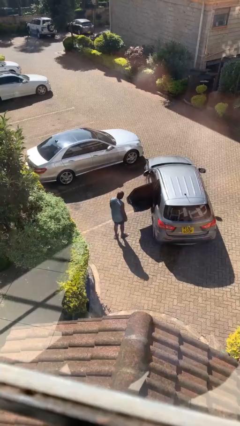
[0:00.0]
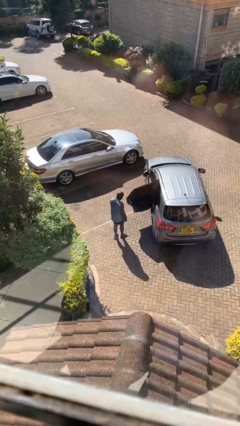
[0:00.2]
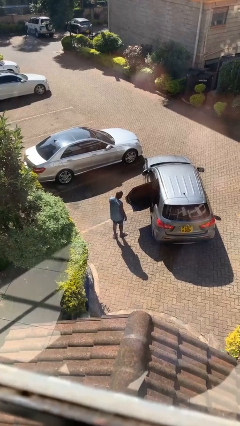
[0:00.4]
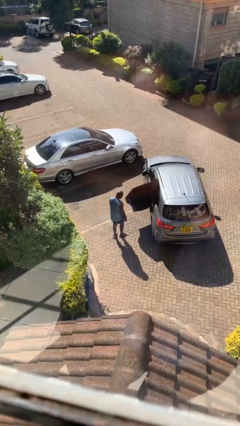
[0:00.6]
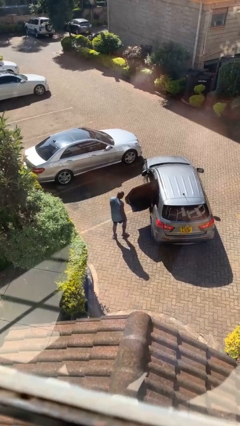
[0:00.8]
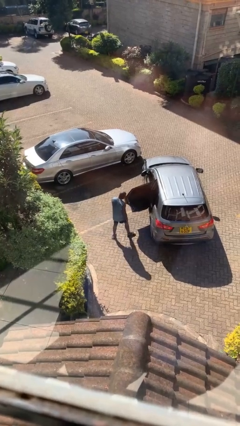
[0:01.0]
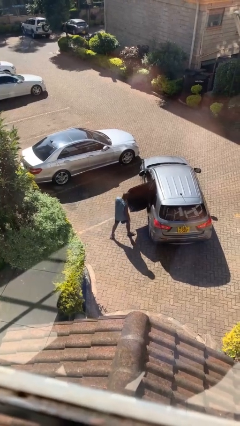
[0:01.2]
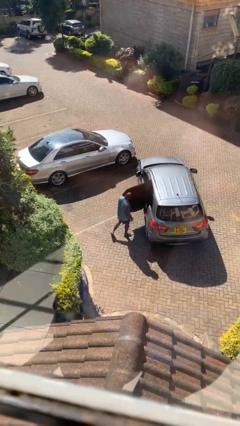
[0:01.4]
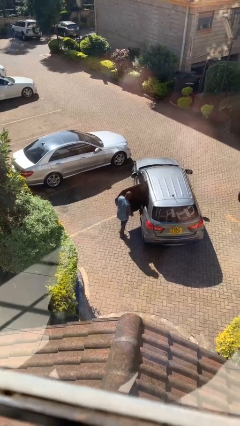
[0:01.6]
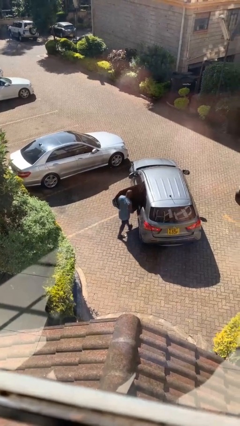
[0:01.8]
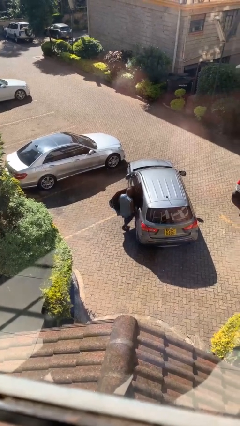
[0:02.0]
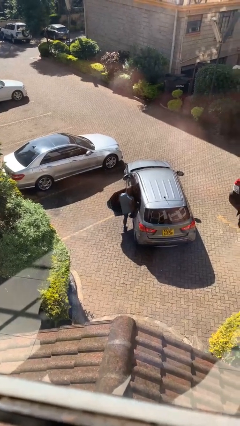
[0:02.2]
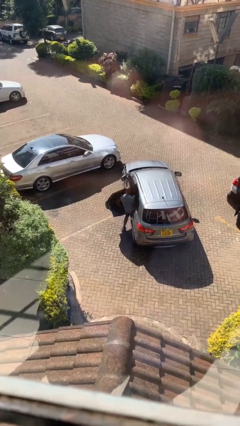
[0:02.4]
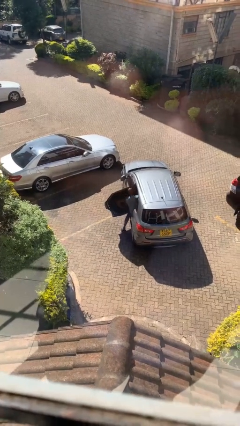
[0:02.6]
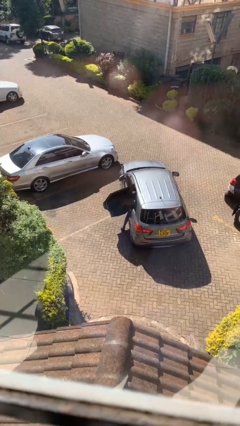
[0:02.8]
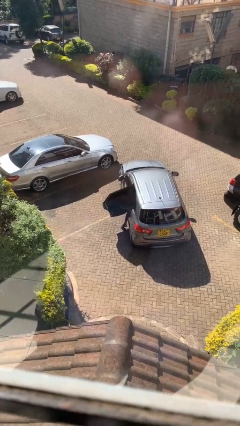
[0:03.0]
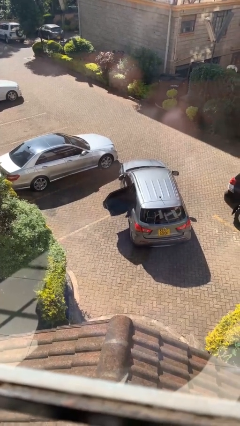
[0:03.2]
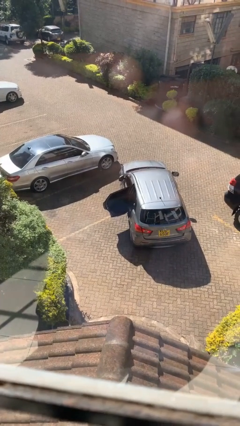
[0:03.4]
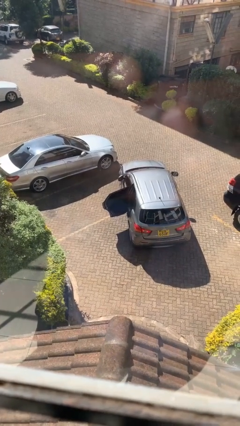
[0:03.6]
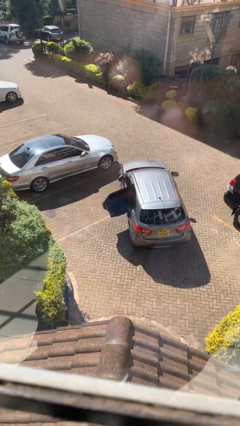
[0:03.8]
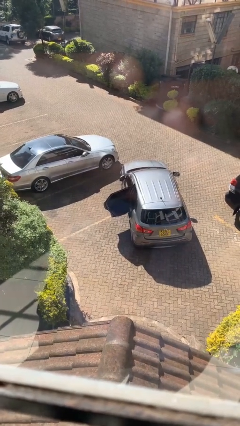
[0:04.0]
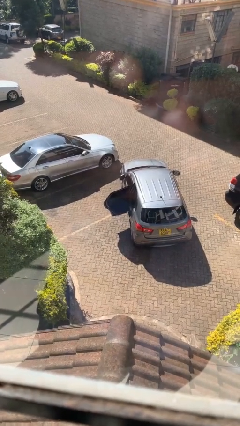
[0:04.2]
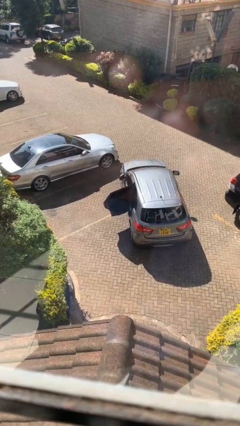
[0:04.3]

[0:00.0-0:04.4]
person enters car

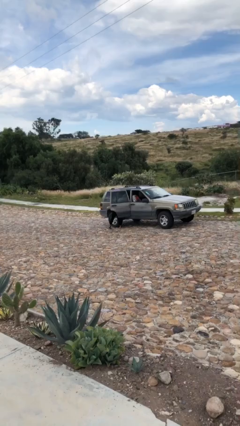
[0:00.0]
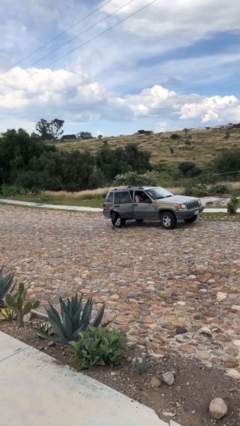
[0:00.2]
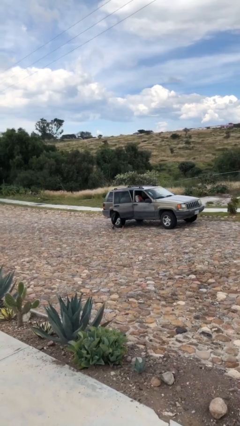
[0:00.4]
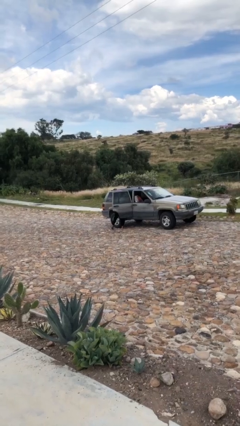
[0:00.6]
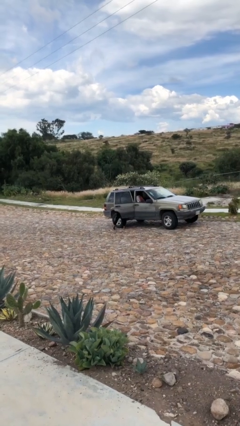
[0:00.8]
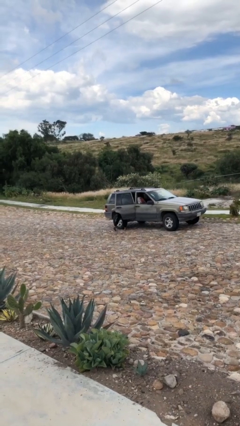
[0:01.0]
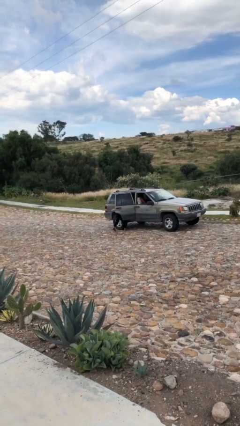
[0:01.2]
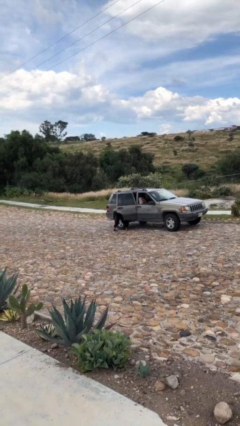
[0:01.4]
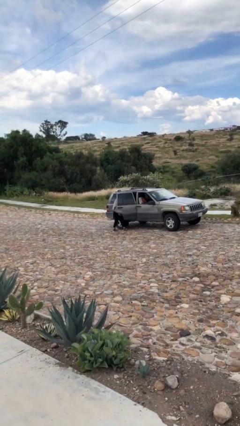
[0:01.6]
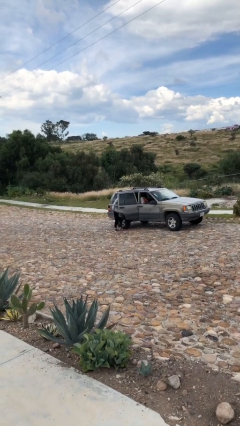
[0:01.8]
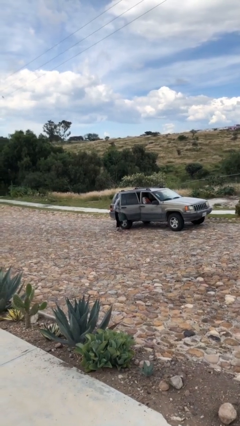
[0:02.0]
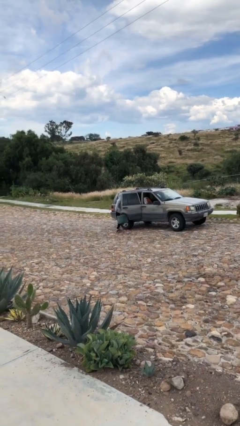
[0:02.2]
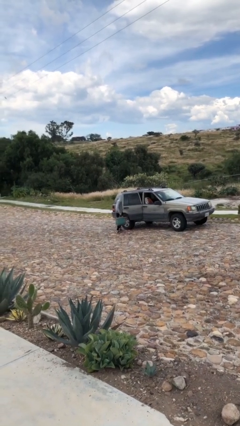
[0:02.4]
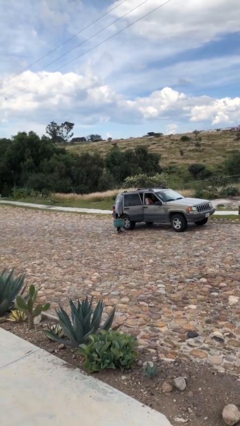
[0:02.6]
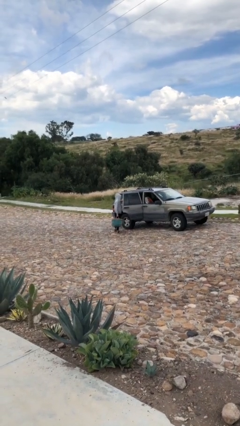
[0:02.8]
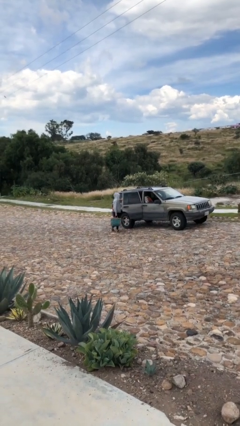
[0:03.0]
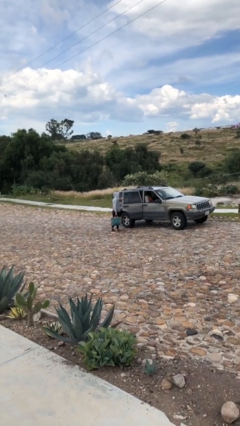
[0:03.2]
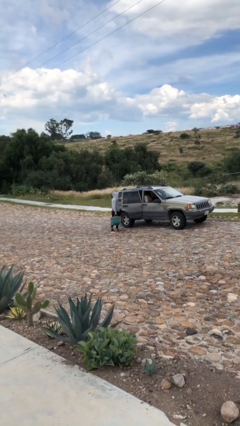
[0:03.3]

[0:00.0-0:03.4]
person unloads car

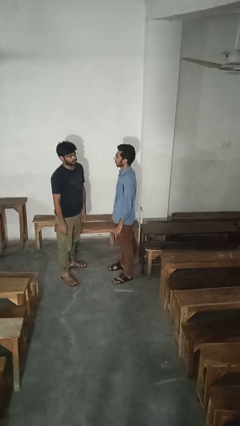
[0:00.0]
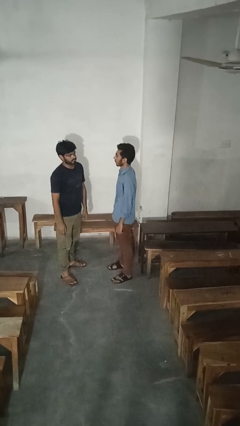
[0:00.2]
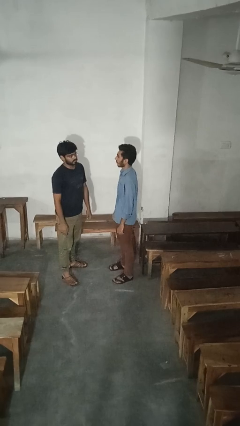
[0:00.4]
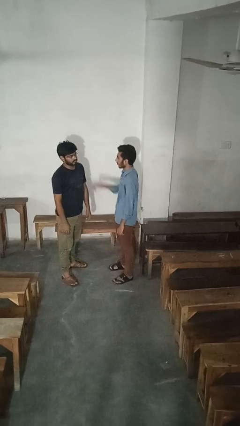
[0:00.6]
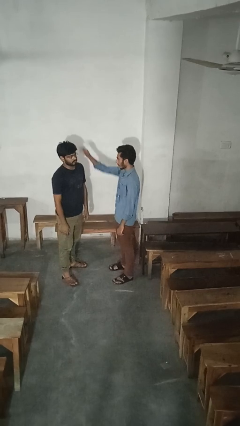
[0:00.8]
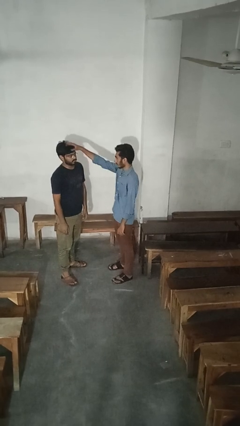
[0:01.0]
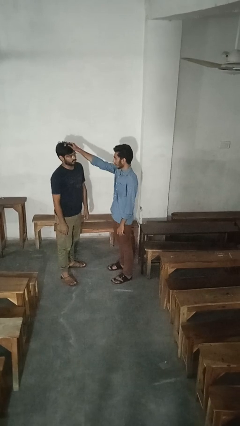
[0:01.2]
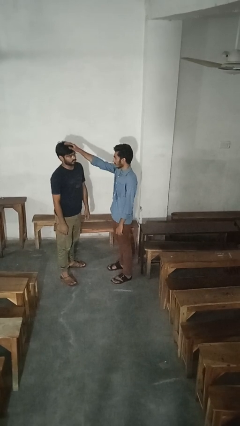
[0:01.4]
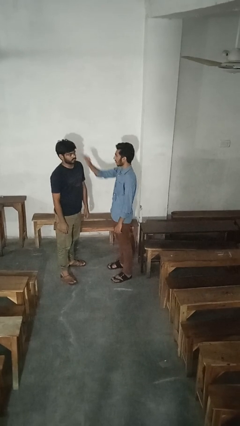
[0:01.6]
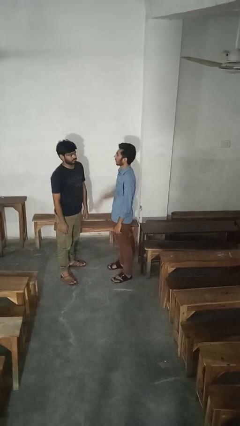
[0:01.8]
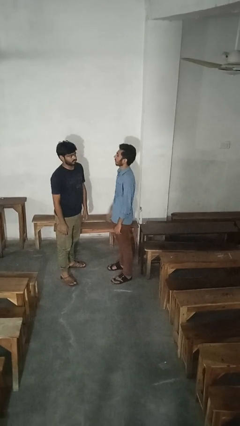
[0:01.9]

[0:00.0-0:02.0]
person grabs person by hair

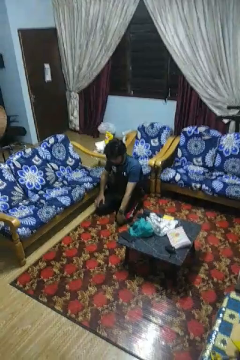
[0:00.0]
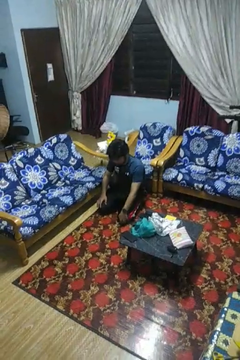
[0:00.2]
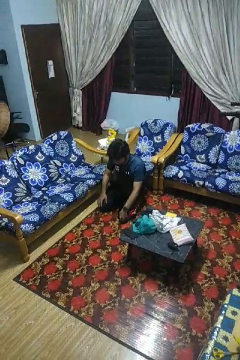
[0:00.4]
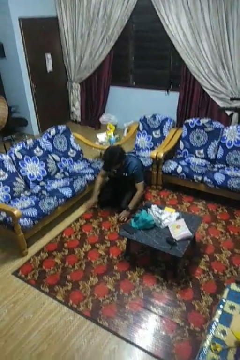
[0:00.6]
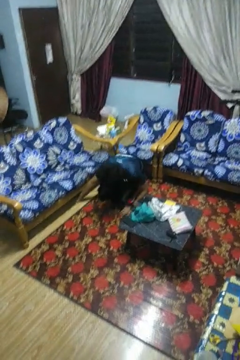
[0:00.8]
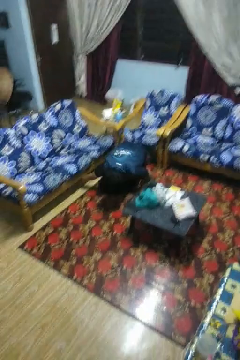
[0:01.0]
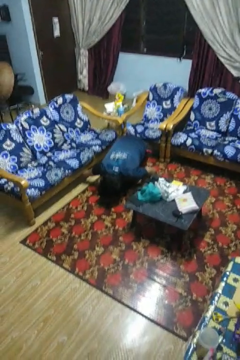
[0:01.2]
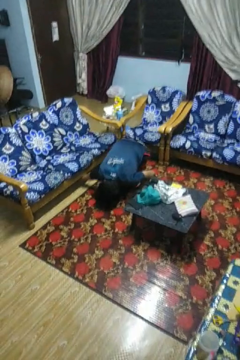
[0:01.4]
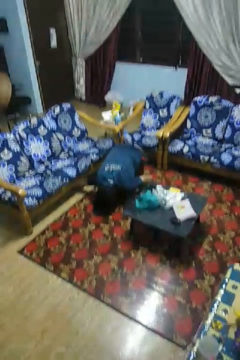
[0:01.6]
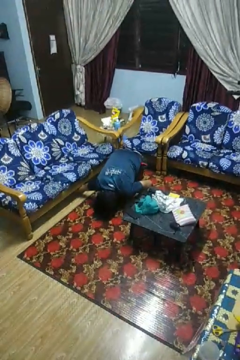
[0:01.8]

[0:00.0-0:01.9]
person searches under couch

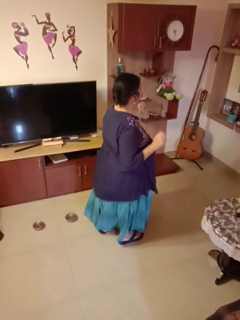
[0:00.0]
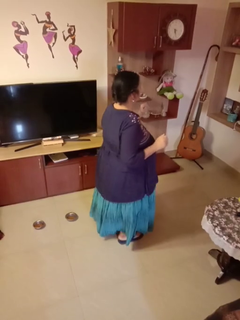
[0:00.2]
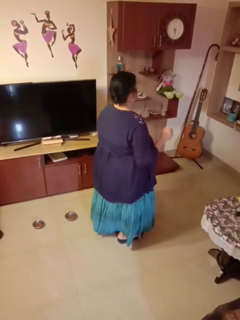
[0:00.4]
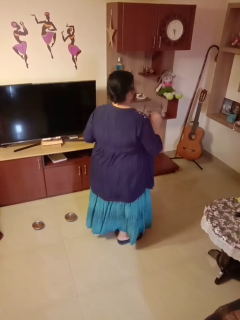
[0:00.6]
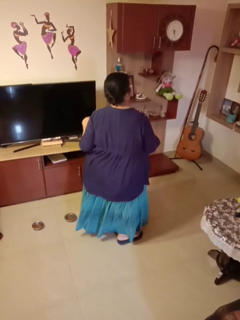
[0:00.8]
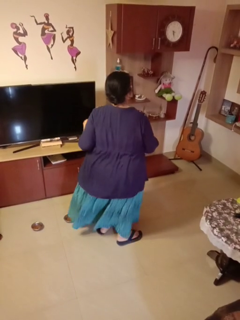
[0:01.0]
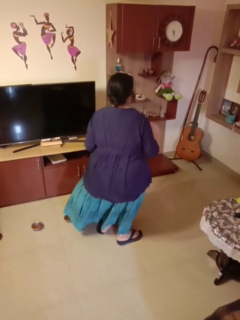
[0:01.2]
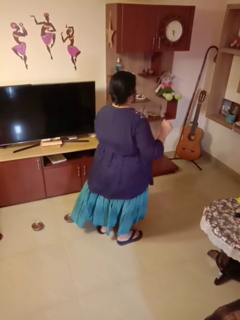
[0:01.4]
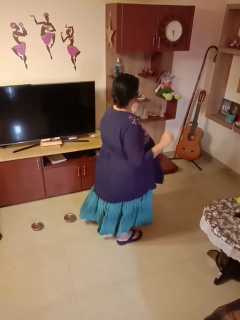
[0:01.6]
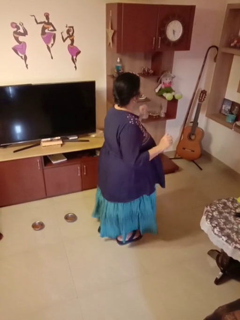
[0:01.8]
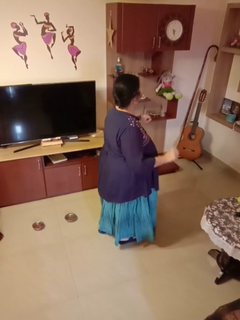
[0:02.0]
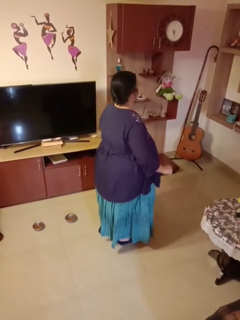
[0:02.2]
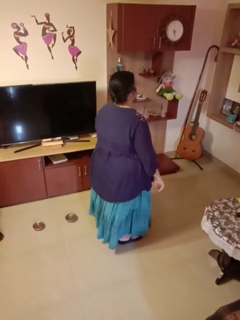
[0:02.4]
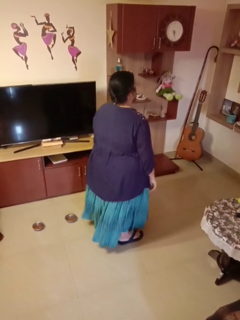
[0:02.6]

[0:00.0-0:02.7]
person dances in place

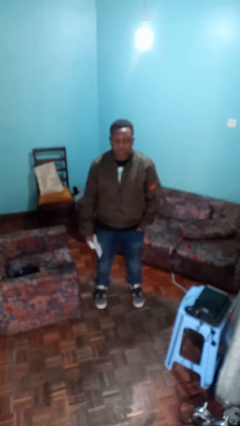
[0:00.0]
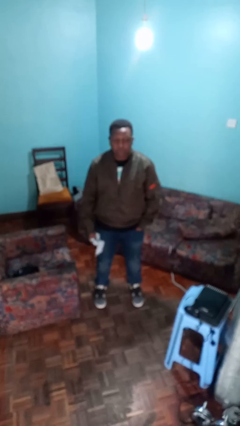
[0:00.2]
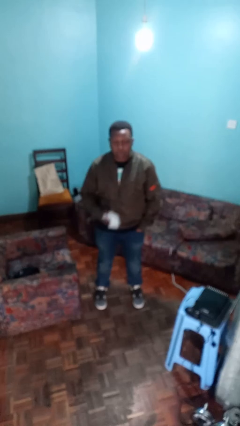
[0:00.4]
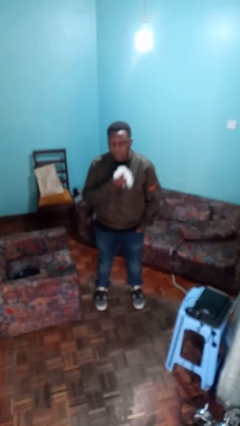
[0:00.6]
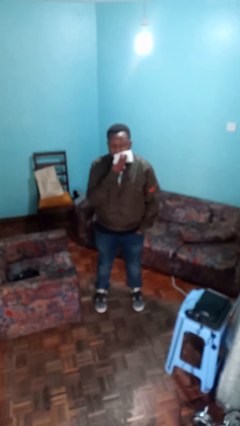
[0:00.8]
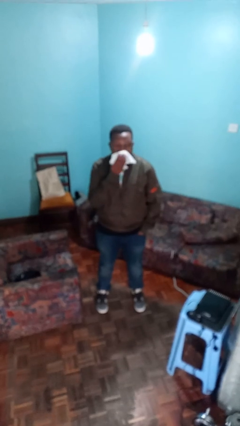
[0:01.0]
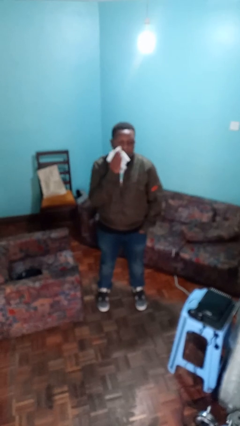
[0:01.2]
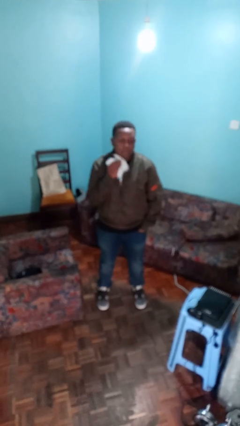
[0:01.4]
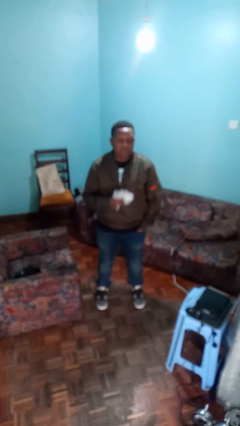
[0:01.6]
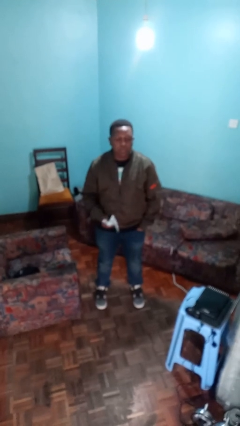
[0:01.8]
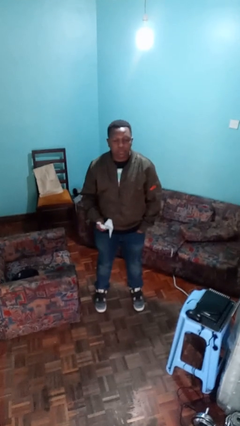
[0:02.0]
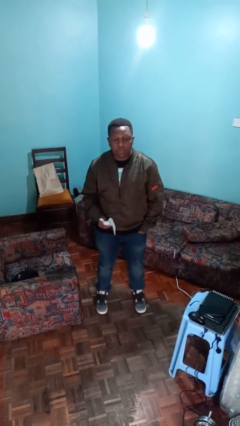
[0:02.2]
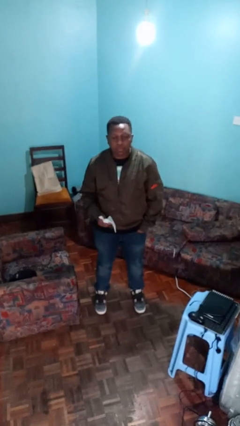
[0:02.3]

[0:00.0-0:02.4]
person wipes mouth with napkin

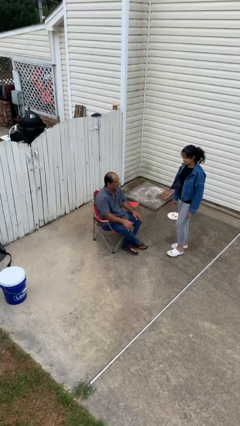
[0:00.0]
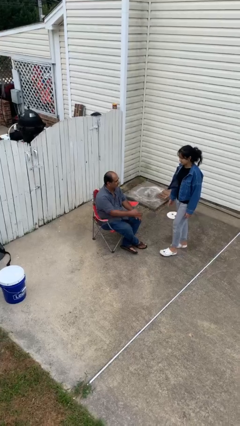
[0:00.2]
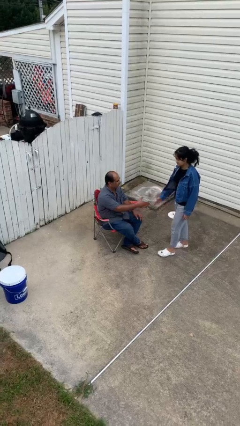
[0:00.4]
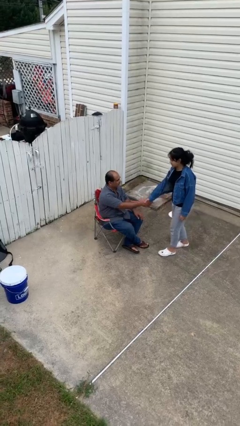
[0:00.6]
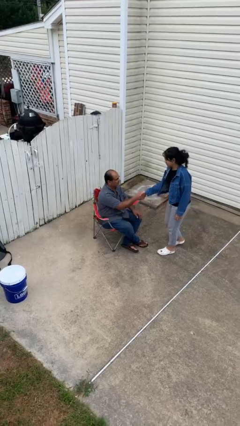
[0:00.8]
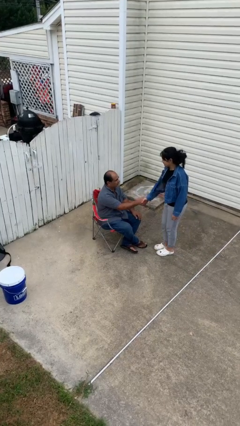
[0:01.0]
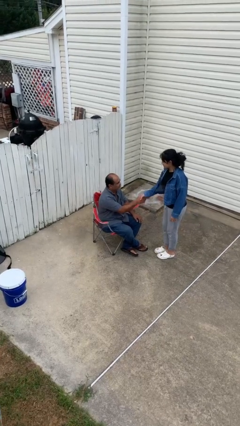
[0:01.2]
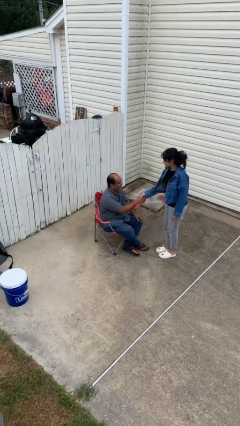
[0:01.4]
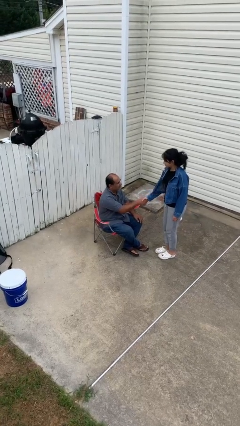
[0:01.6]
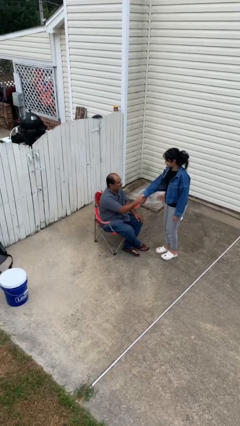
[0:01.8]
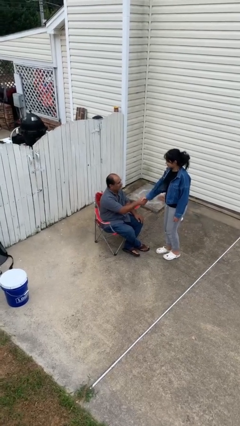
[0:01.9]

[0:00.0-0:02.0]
person shakes hand
